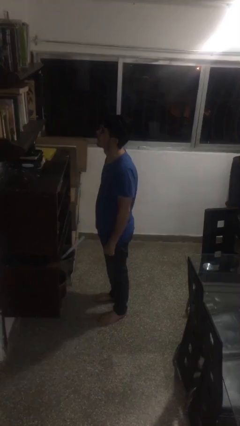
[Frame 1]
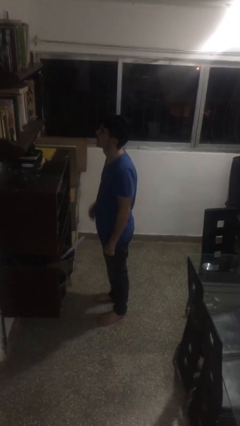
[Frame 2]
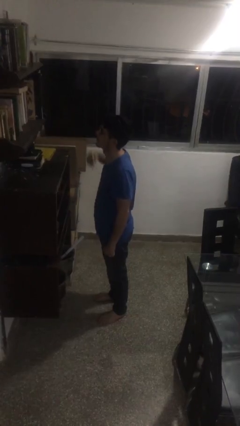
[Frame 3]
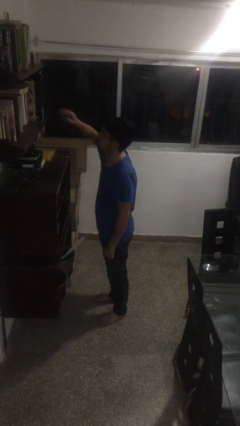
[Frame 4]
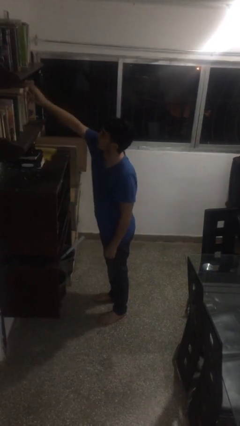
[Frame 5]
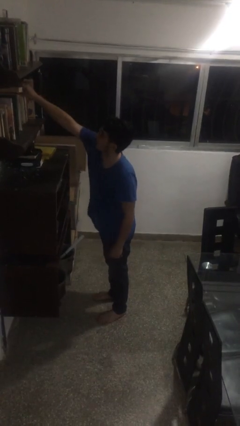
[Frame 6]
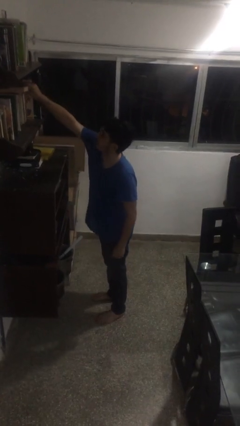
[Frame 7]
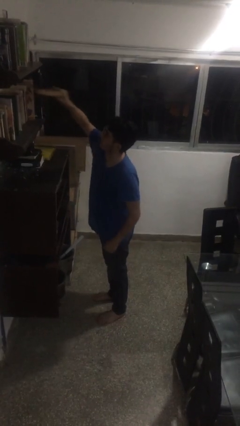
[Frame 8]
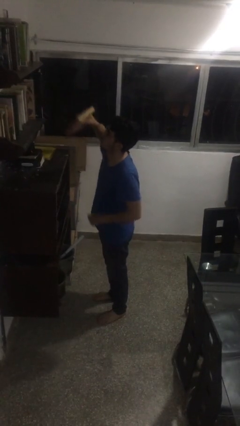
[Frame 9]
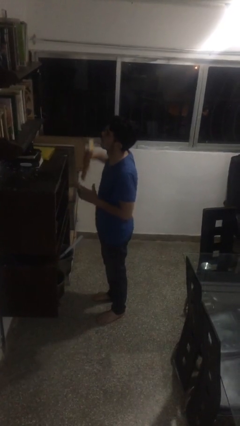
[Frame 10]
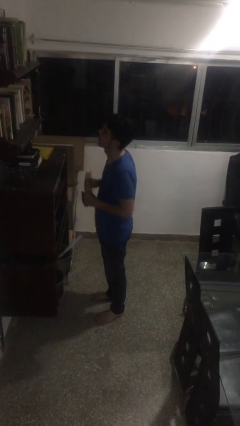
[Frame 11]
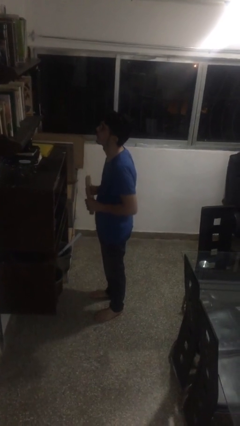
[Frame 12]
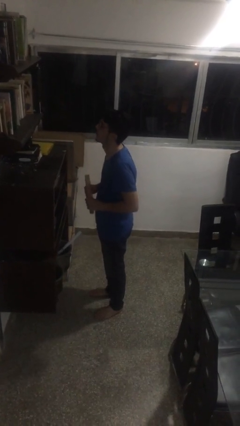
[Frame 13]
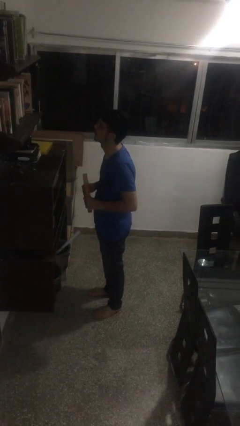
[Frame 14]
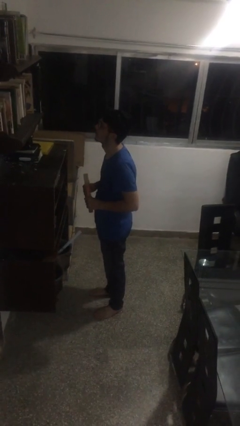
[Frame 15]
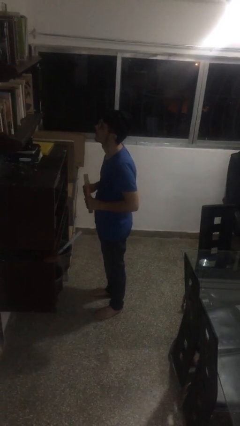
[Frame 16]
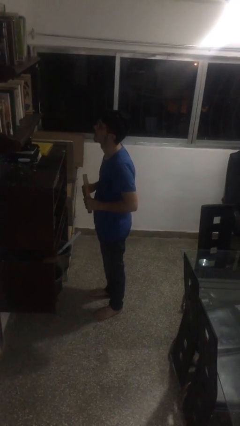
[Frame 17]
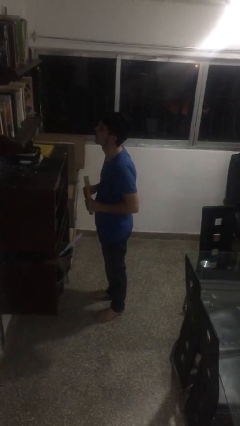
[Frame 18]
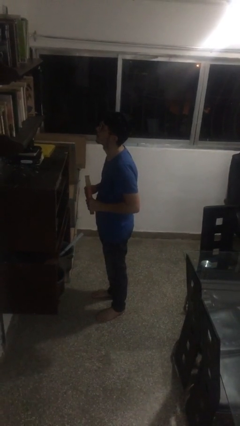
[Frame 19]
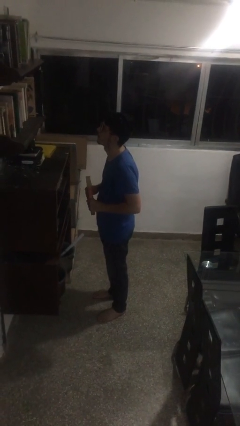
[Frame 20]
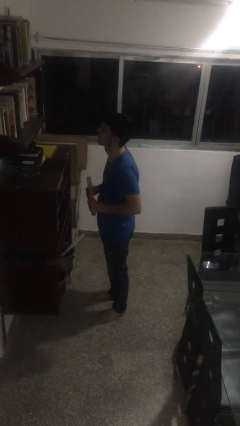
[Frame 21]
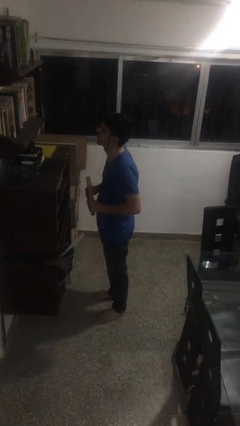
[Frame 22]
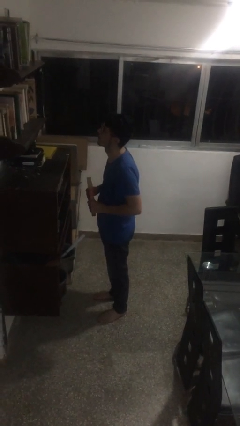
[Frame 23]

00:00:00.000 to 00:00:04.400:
person picks up object from shelf

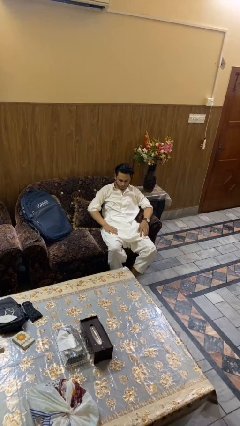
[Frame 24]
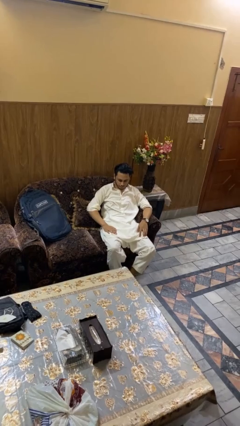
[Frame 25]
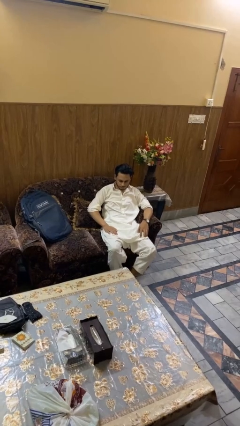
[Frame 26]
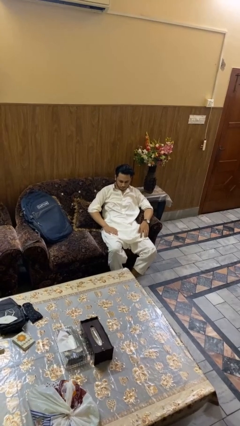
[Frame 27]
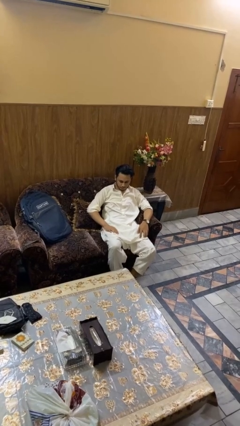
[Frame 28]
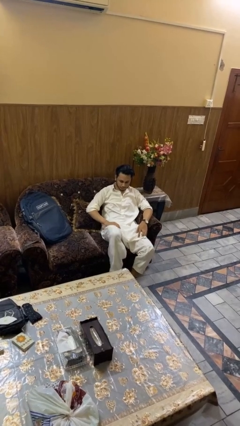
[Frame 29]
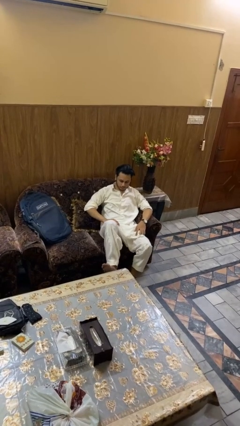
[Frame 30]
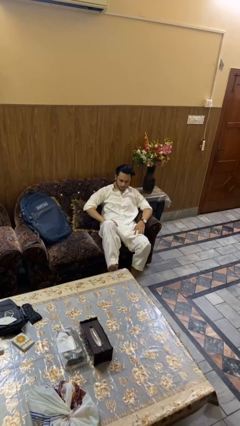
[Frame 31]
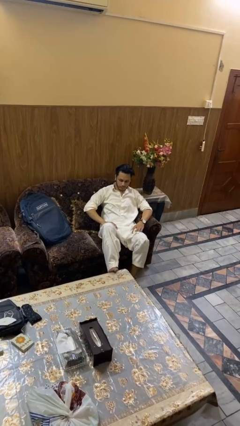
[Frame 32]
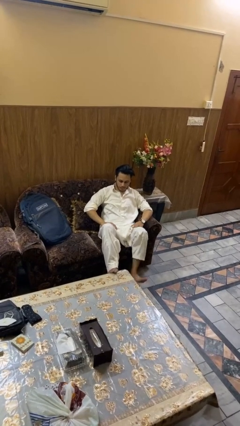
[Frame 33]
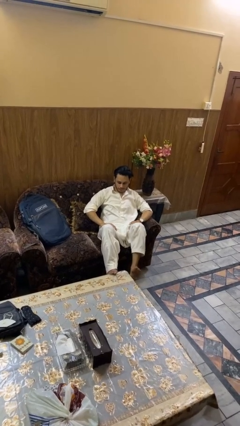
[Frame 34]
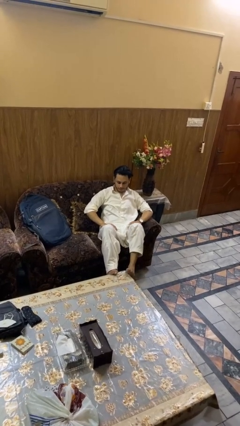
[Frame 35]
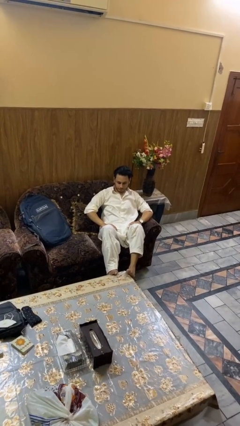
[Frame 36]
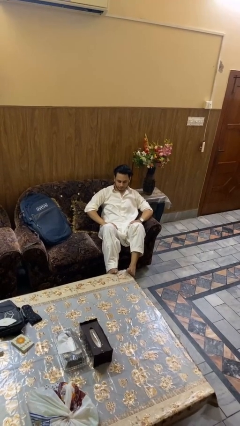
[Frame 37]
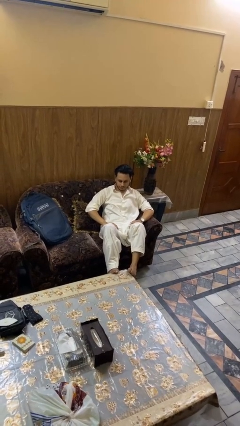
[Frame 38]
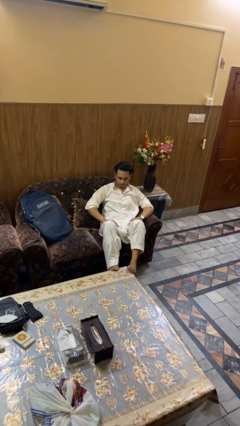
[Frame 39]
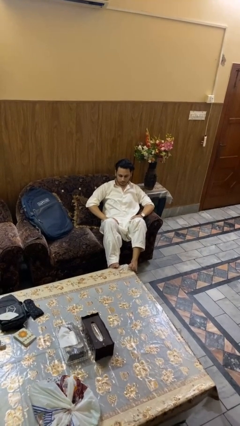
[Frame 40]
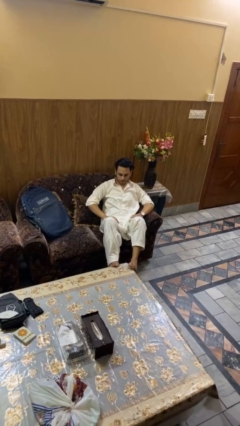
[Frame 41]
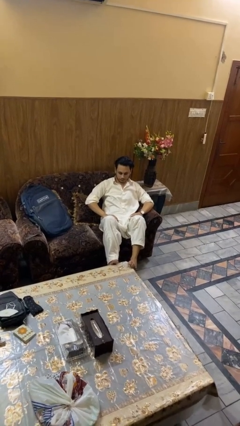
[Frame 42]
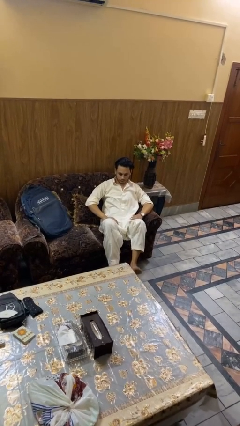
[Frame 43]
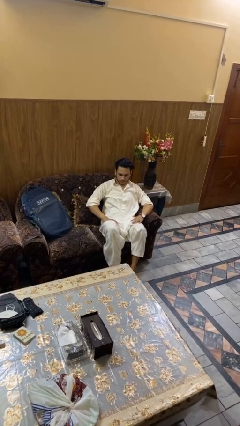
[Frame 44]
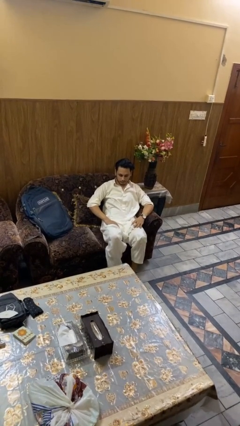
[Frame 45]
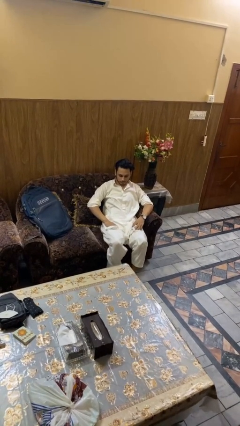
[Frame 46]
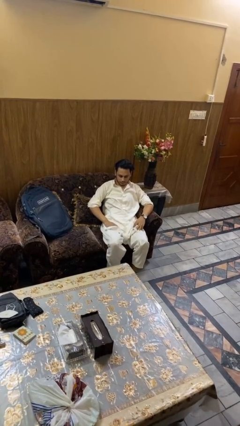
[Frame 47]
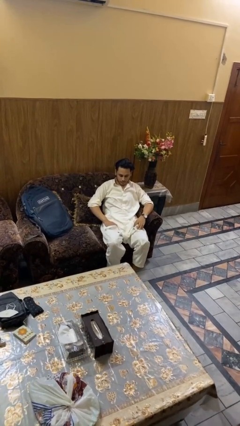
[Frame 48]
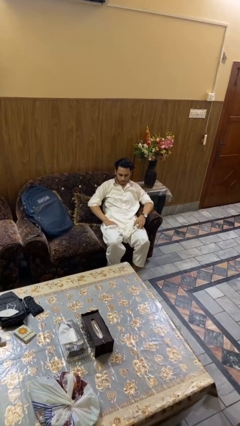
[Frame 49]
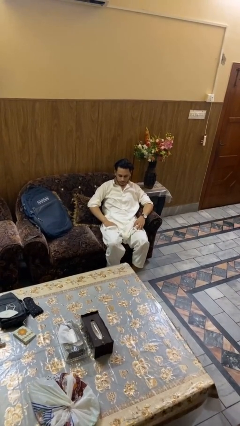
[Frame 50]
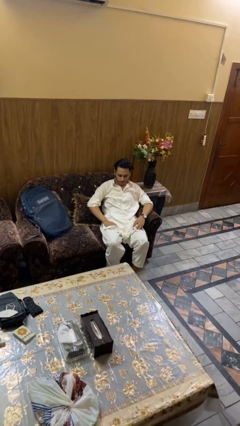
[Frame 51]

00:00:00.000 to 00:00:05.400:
person puts feet up

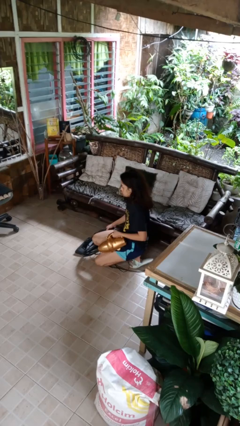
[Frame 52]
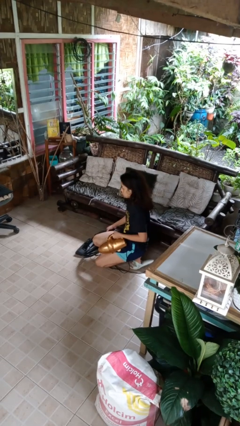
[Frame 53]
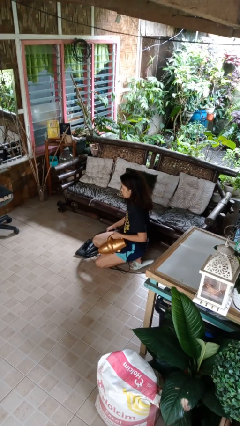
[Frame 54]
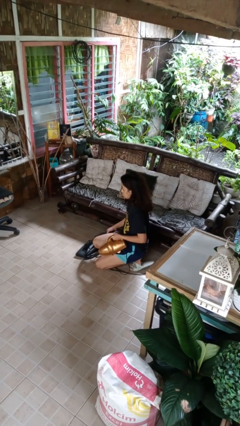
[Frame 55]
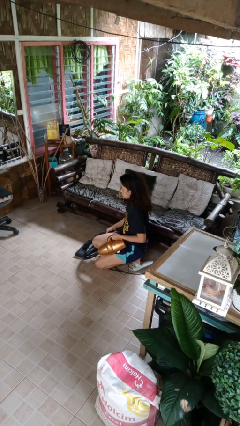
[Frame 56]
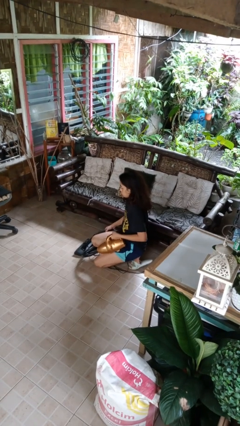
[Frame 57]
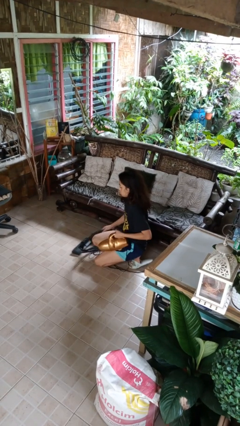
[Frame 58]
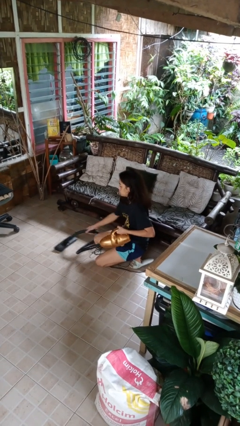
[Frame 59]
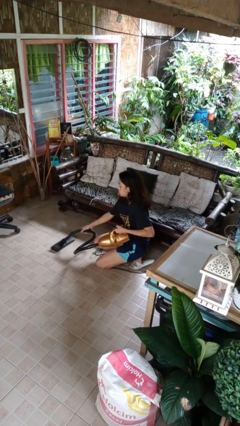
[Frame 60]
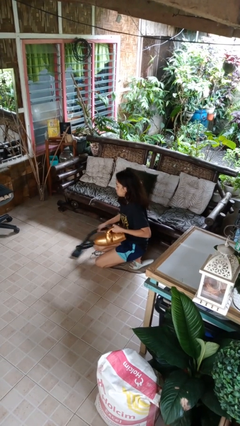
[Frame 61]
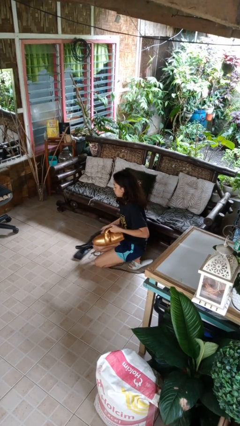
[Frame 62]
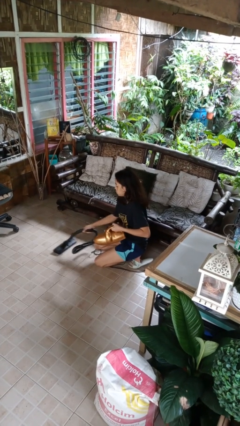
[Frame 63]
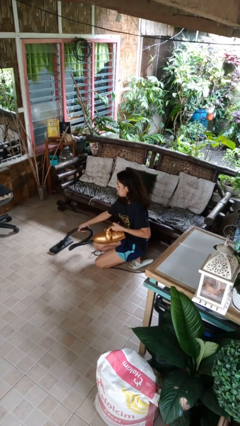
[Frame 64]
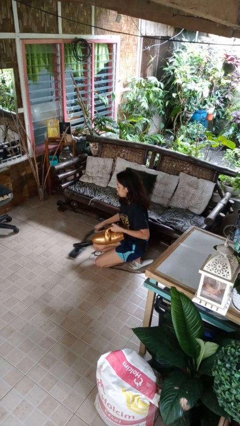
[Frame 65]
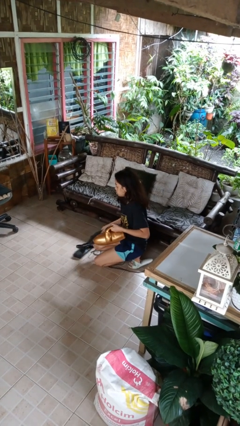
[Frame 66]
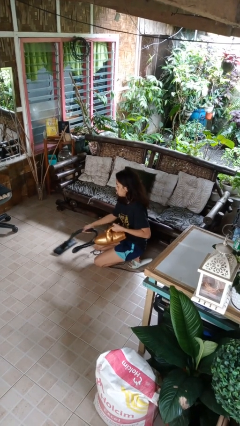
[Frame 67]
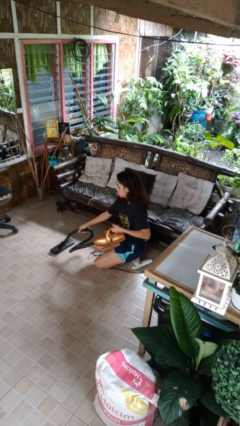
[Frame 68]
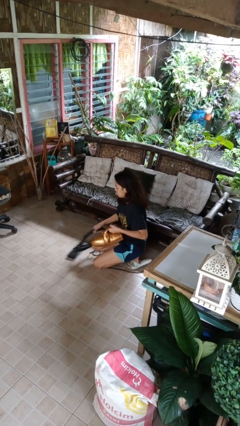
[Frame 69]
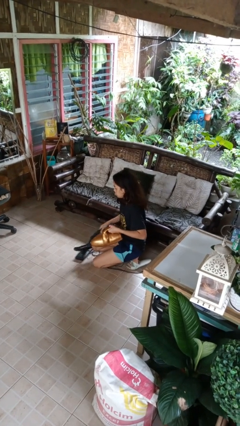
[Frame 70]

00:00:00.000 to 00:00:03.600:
person vacuums carpet

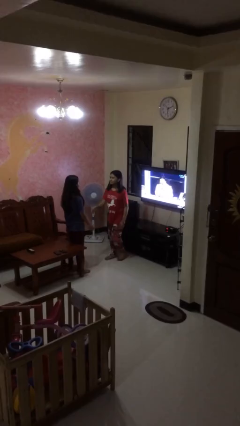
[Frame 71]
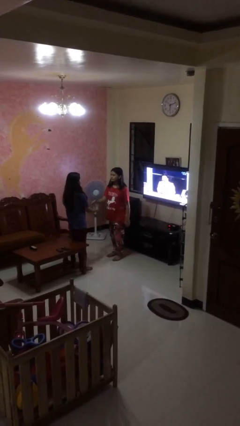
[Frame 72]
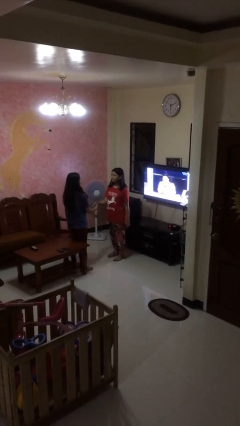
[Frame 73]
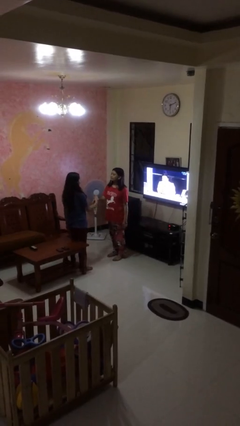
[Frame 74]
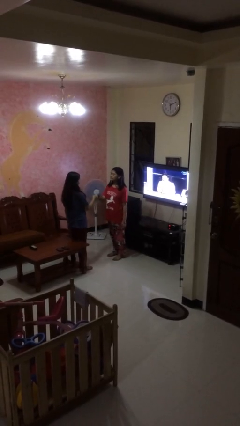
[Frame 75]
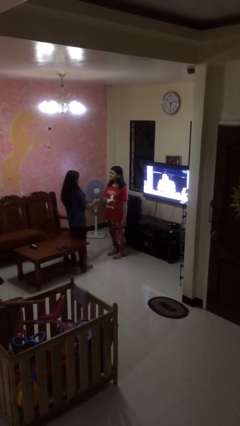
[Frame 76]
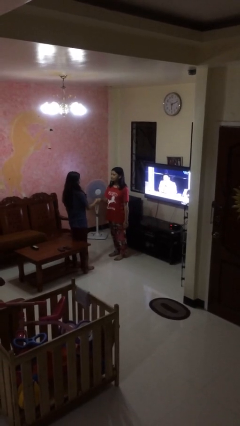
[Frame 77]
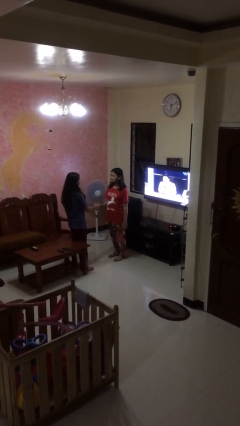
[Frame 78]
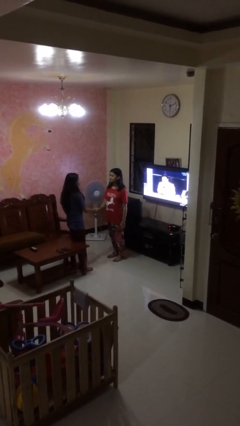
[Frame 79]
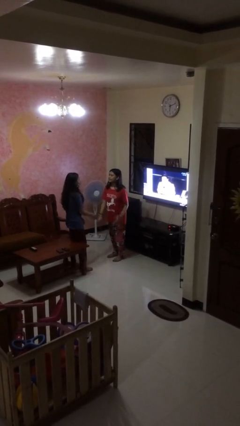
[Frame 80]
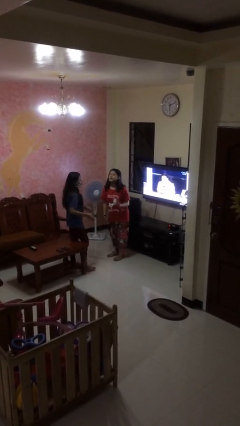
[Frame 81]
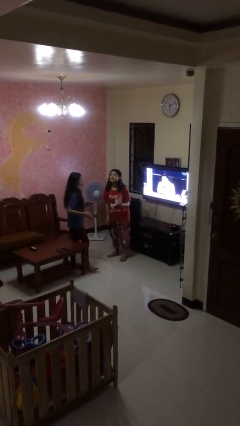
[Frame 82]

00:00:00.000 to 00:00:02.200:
person shakes hand

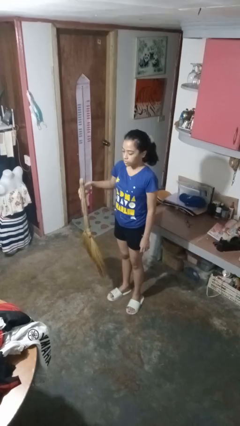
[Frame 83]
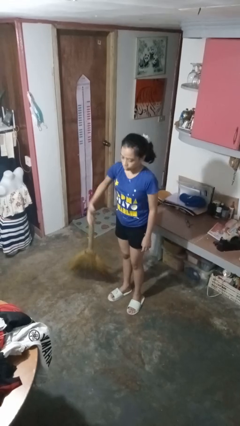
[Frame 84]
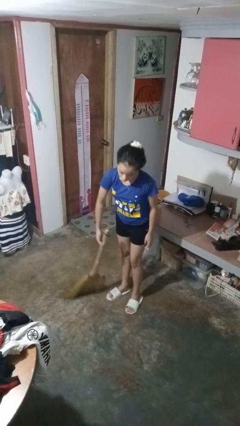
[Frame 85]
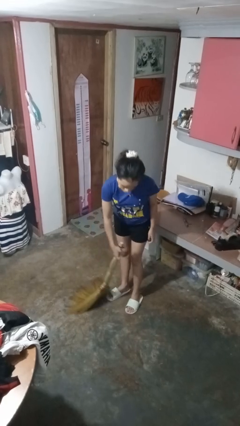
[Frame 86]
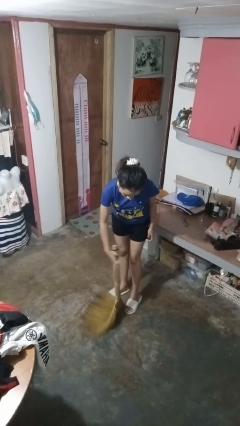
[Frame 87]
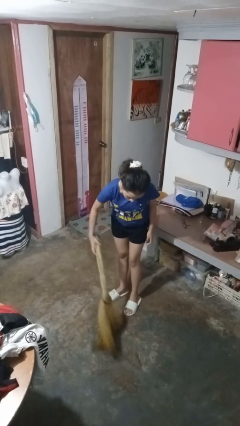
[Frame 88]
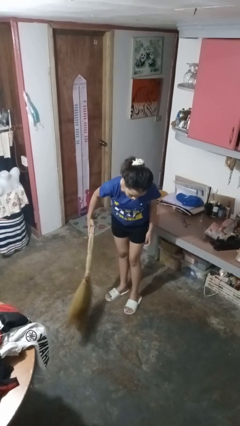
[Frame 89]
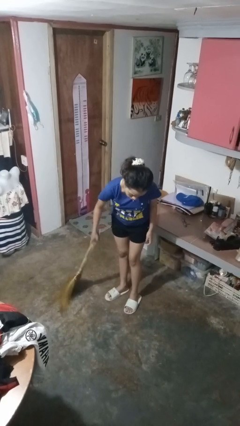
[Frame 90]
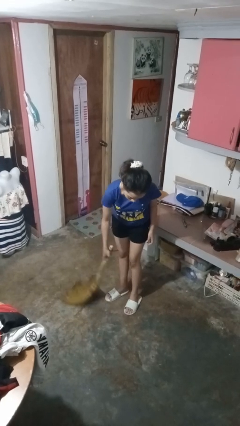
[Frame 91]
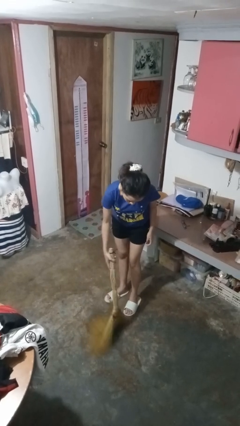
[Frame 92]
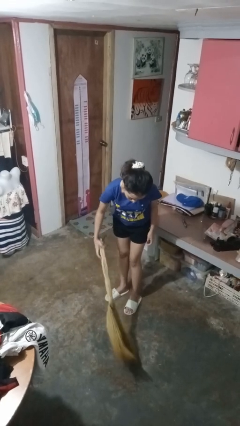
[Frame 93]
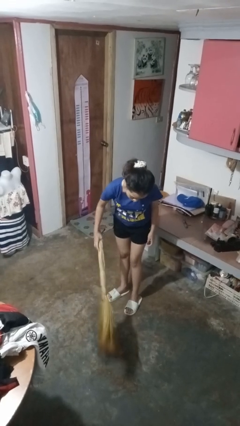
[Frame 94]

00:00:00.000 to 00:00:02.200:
person sweeps floor
